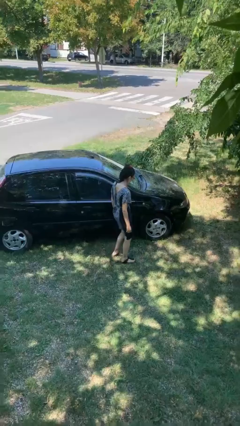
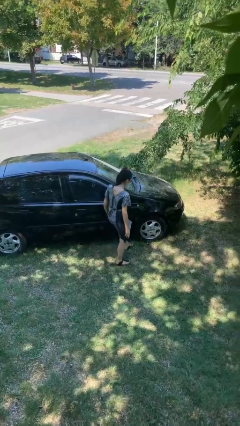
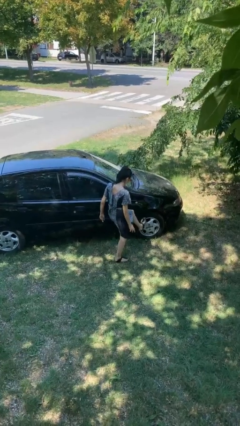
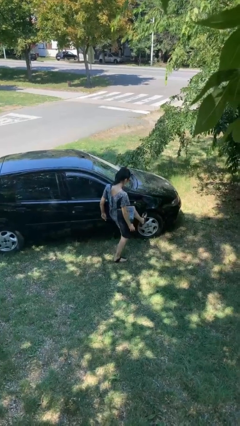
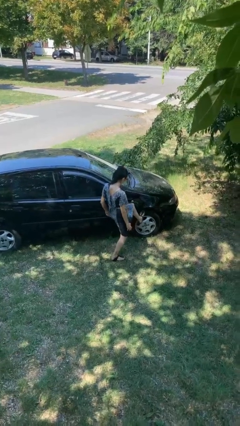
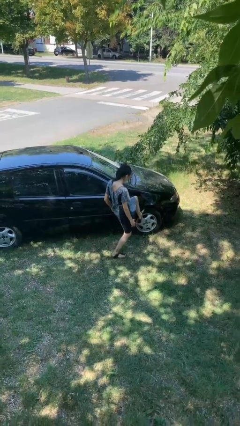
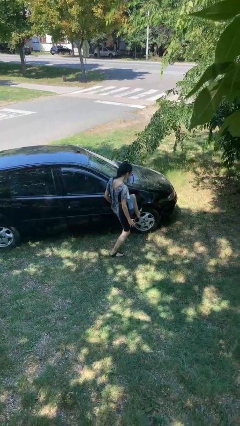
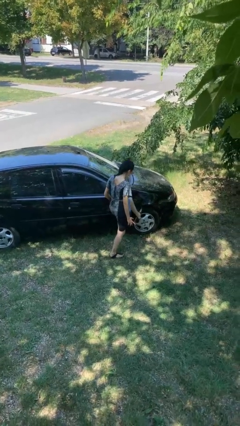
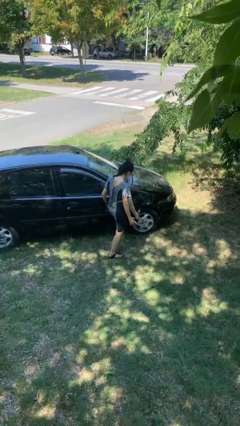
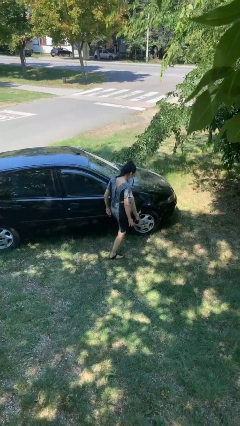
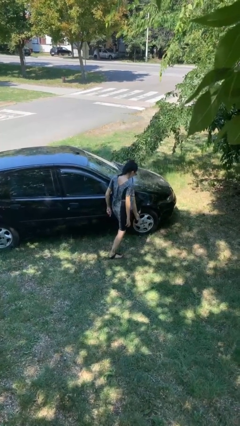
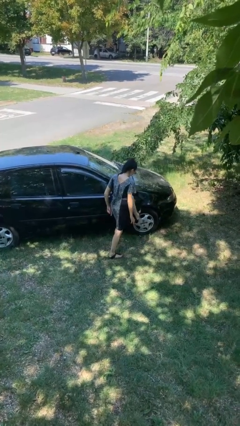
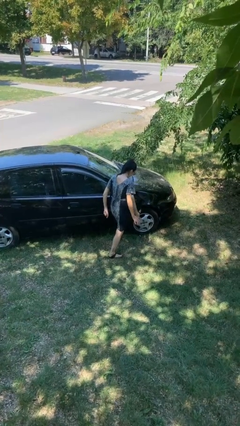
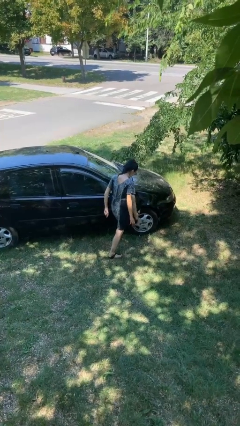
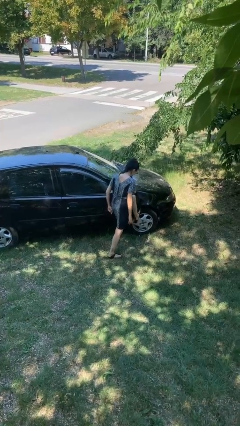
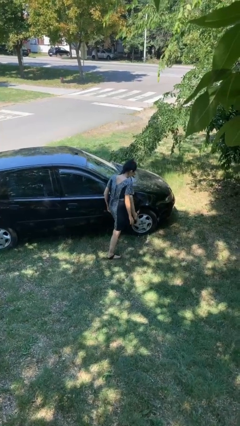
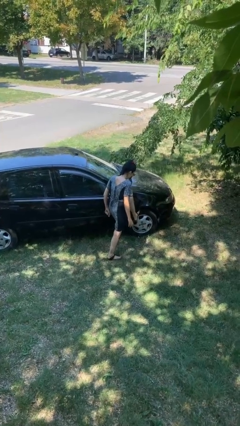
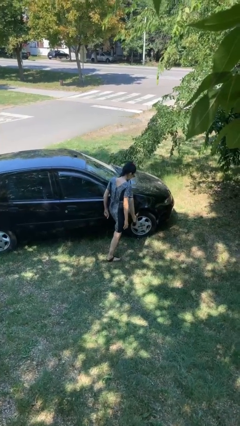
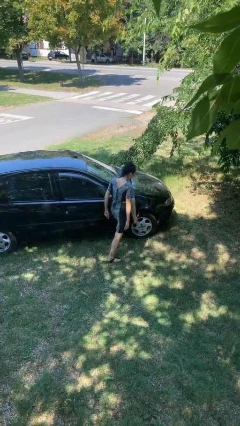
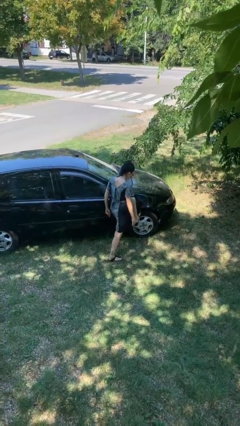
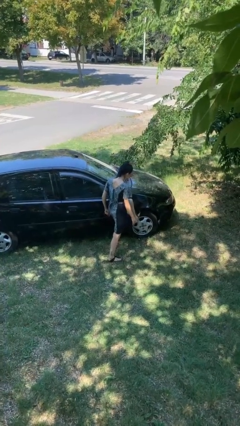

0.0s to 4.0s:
person kicks car tires

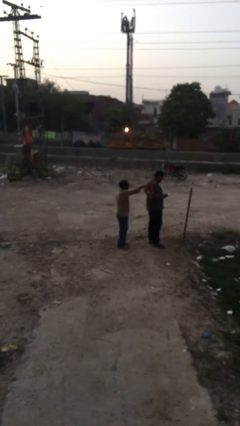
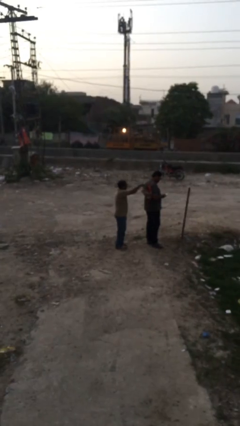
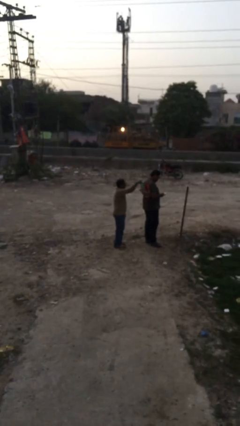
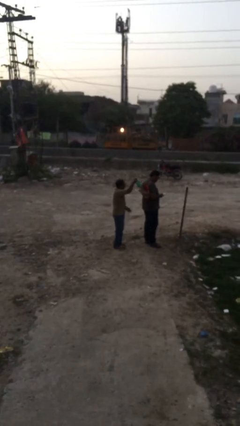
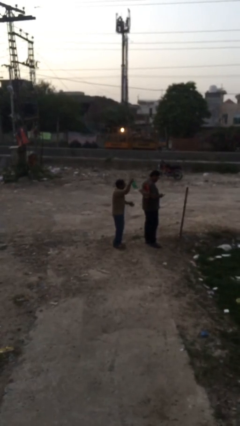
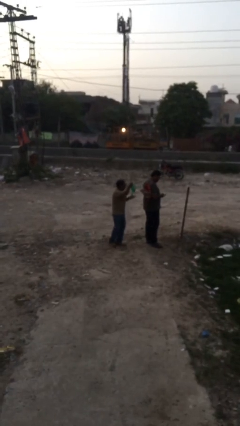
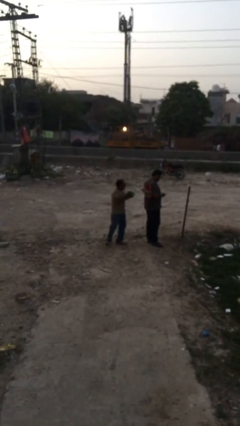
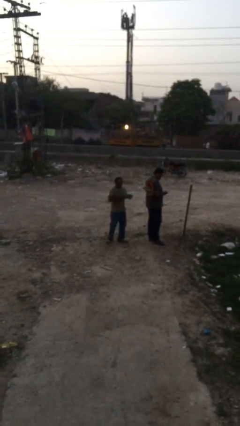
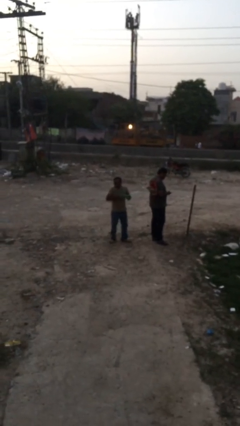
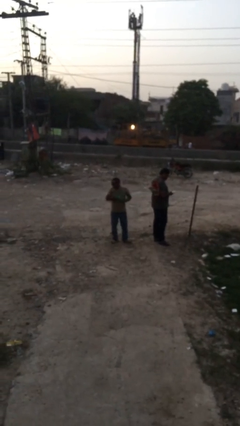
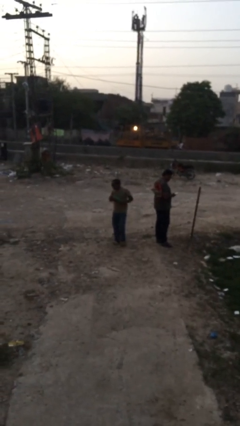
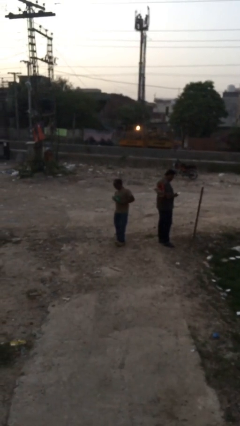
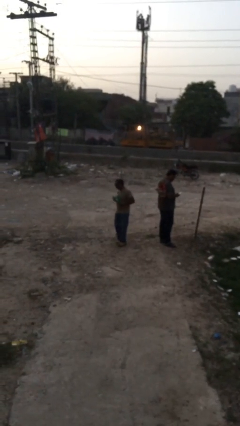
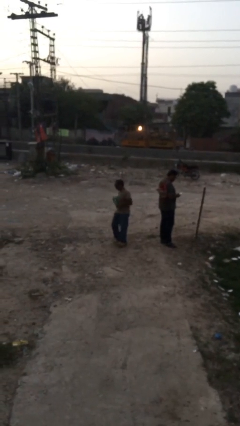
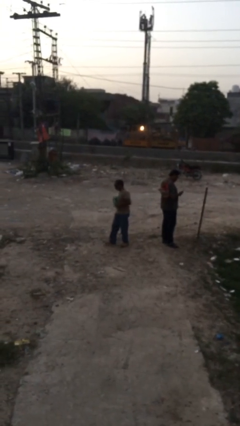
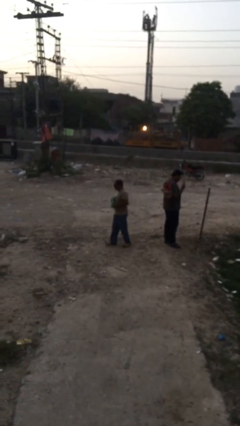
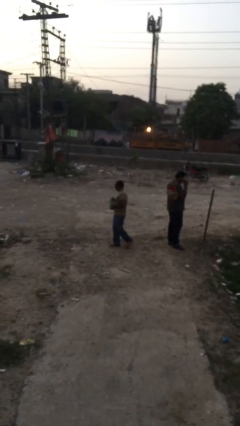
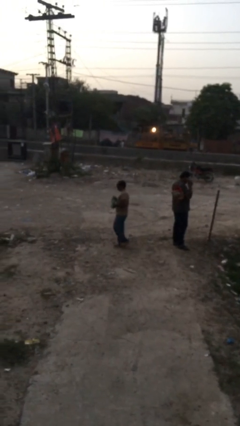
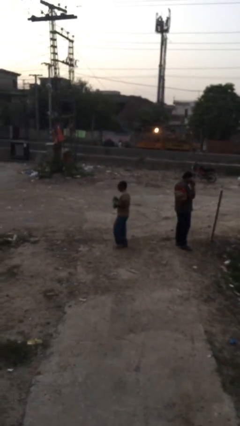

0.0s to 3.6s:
person steals object from person

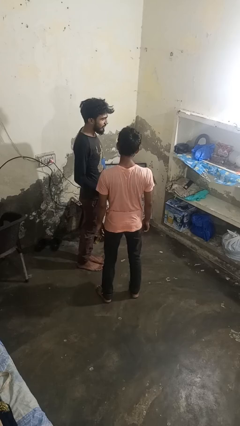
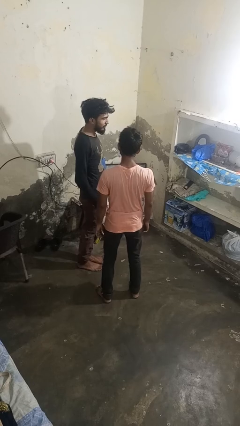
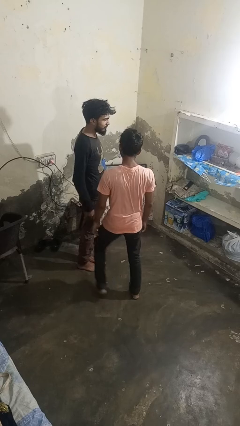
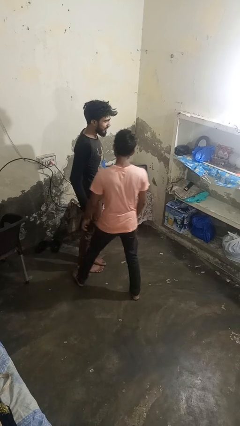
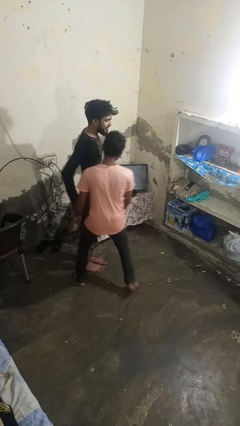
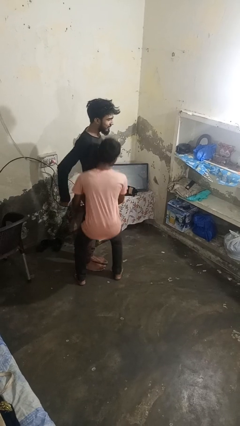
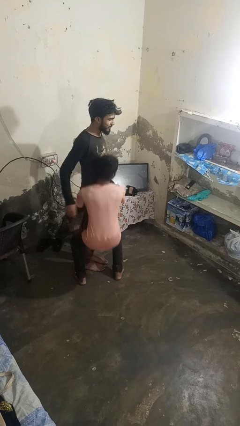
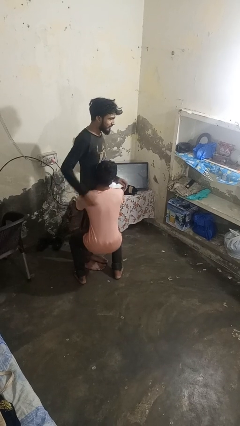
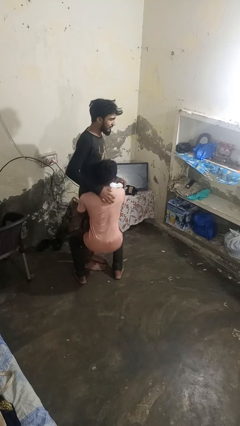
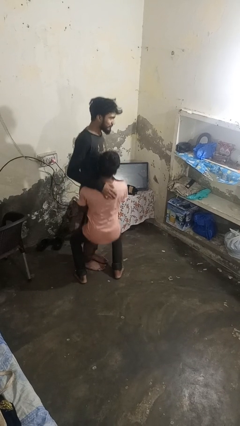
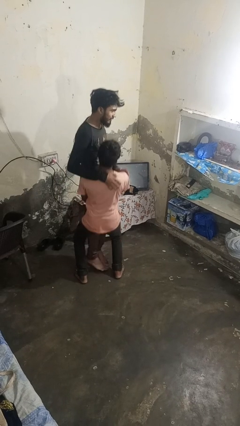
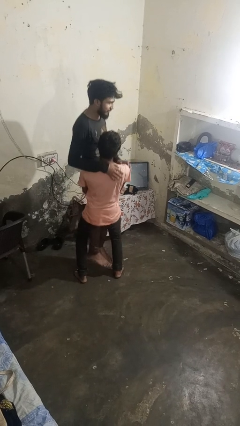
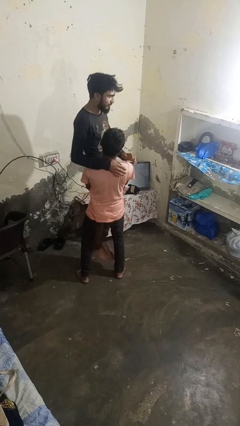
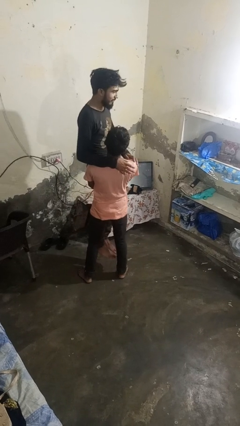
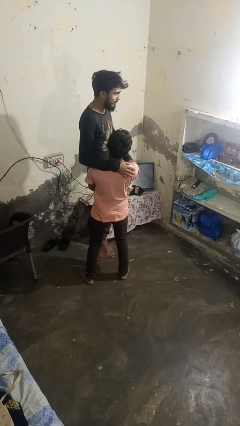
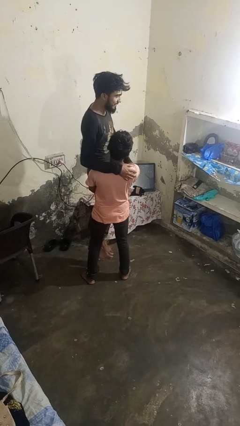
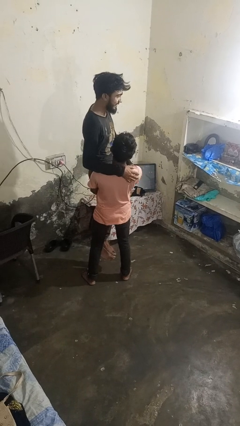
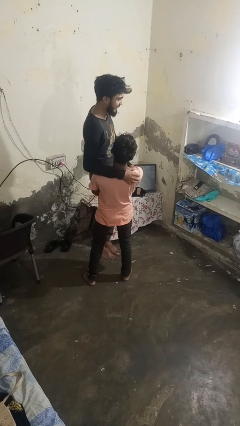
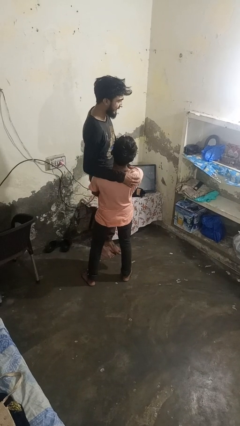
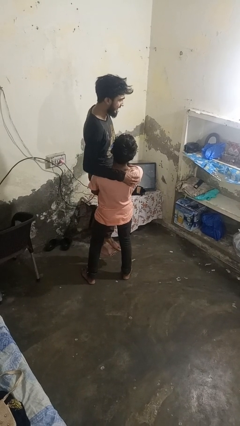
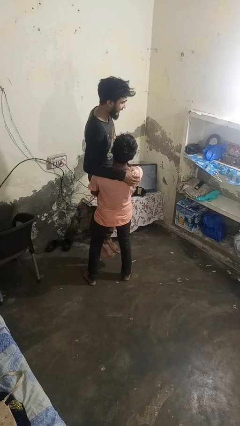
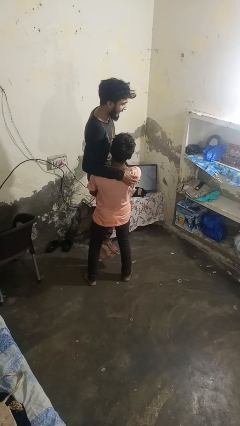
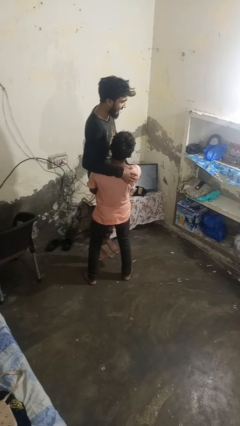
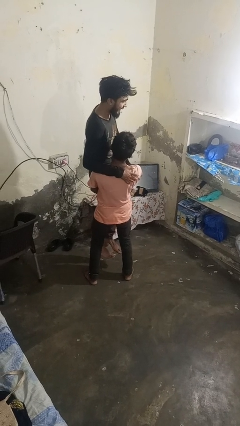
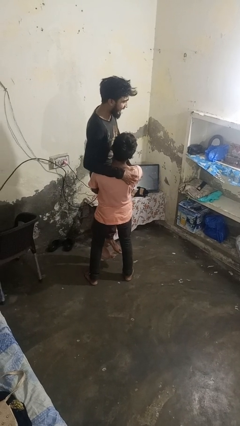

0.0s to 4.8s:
person picks up person

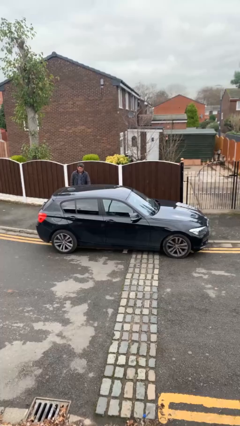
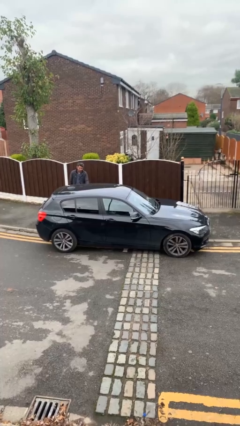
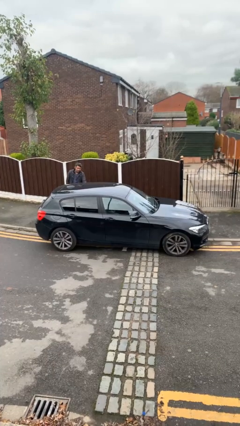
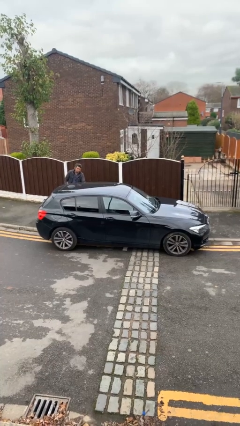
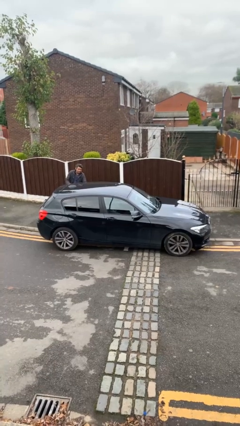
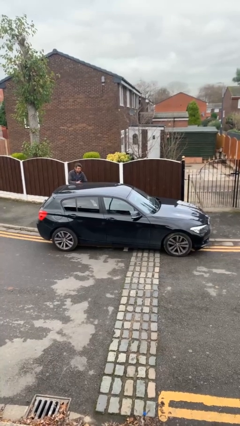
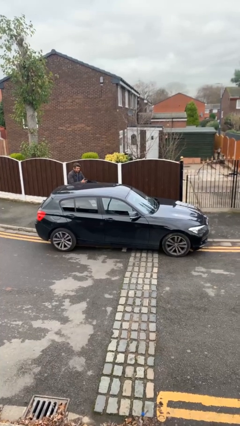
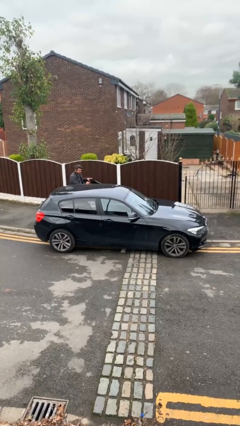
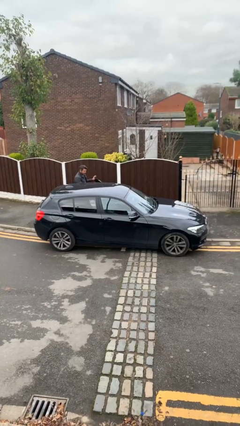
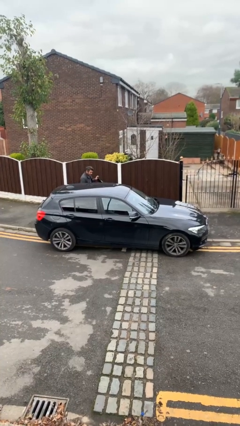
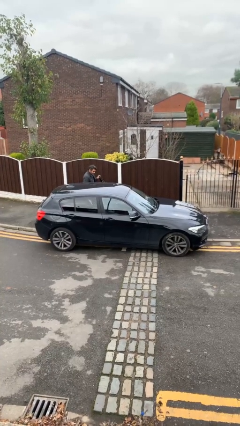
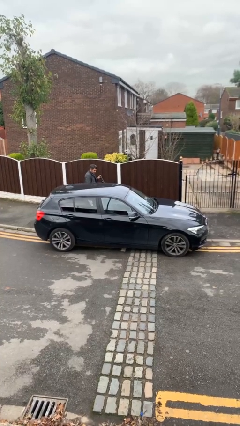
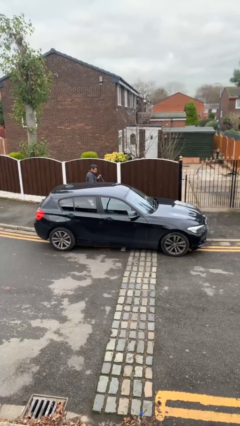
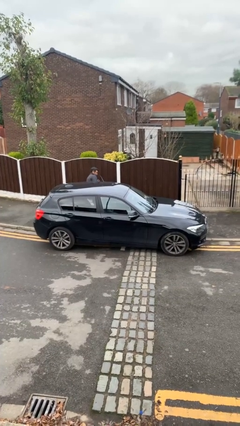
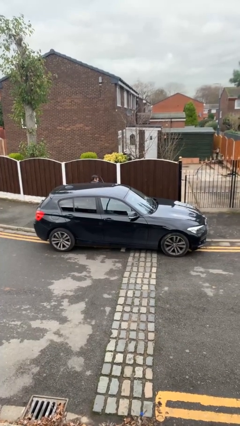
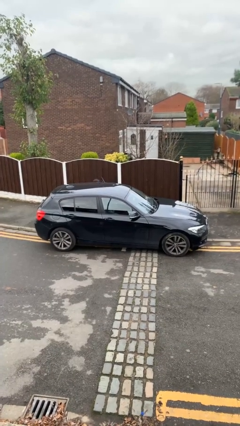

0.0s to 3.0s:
car picks up person

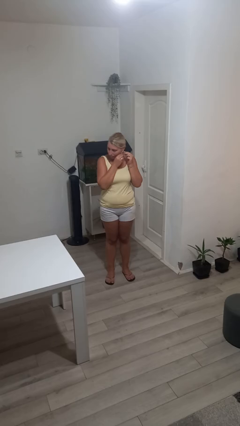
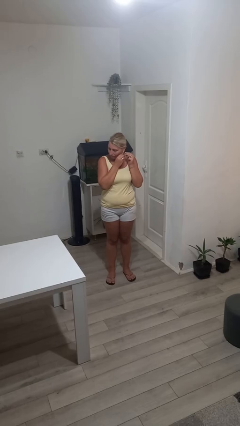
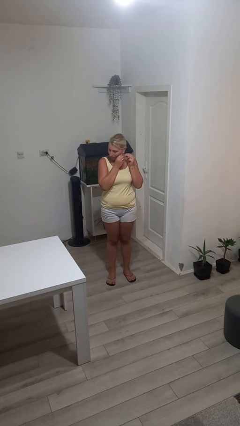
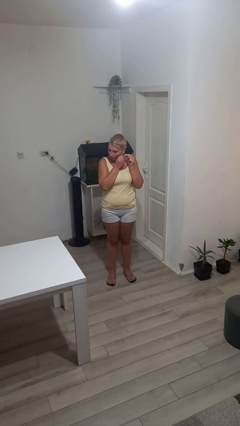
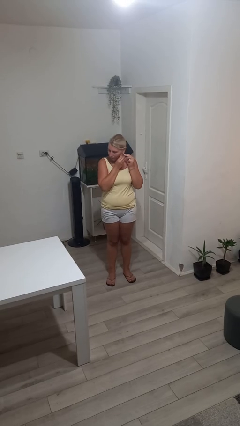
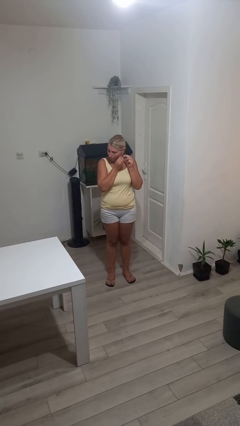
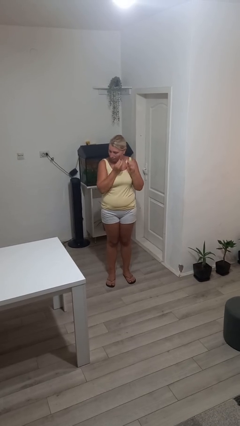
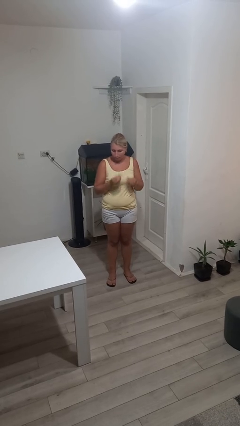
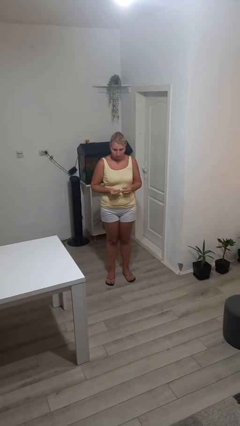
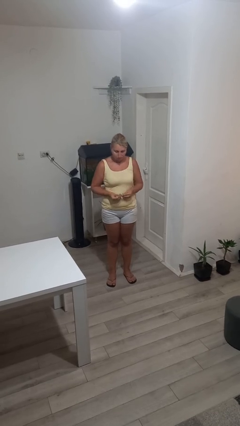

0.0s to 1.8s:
person takes off earrings
